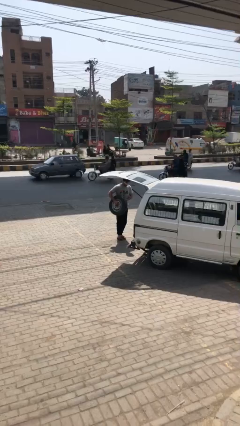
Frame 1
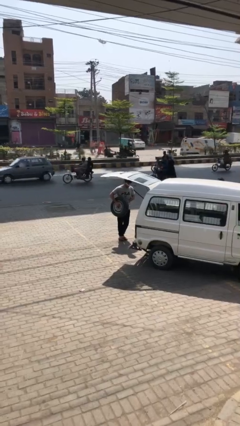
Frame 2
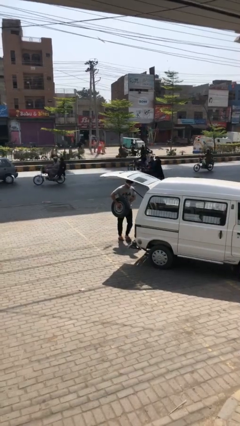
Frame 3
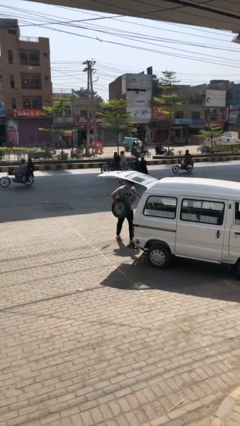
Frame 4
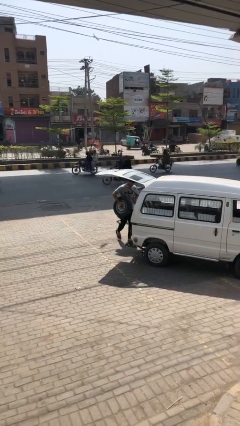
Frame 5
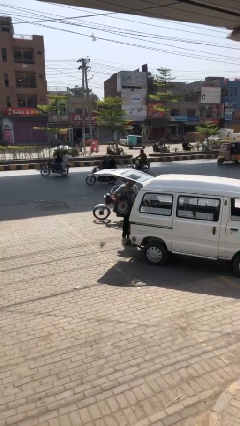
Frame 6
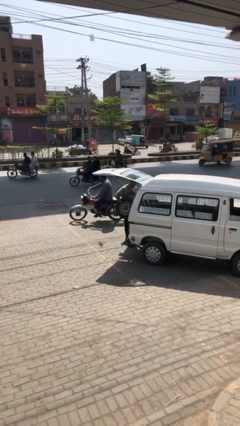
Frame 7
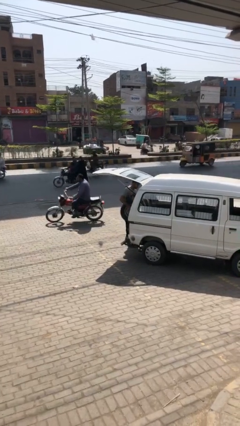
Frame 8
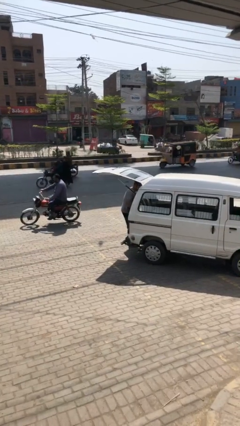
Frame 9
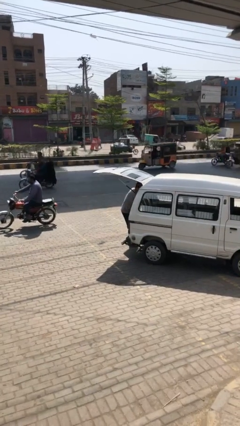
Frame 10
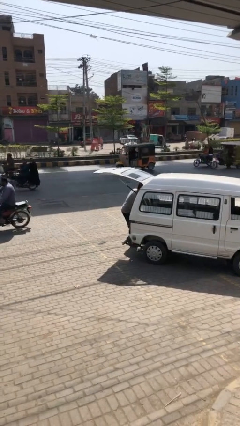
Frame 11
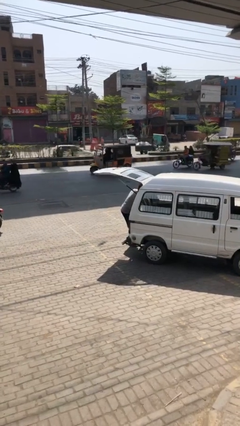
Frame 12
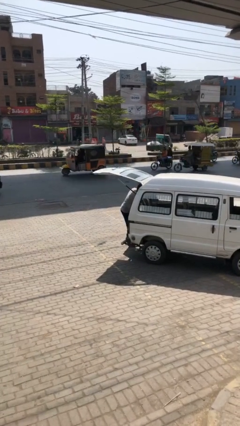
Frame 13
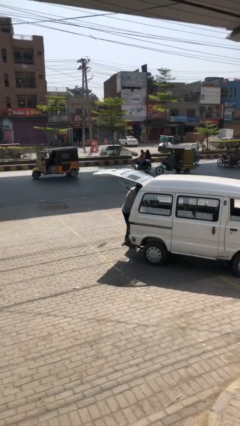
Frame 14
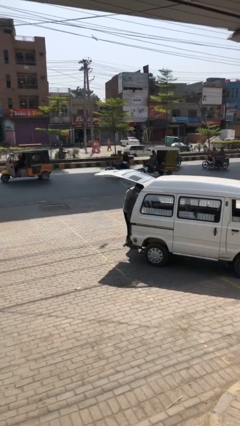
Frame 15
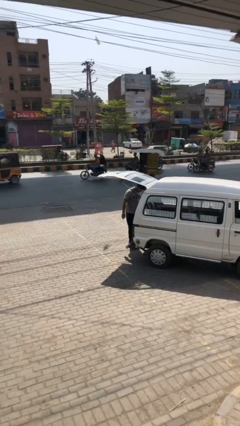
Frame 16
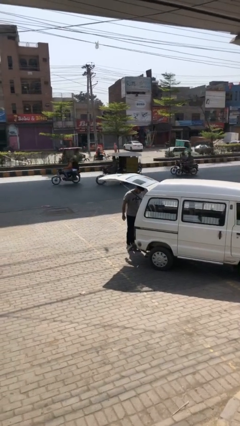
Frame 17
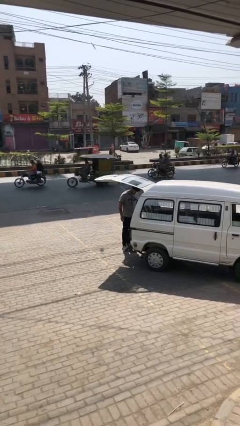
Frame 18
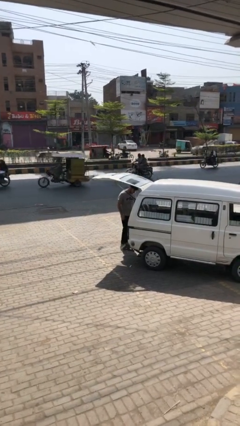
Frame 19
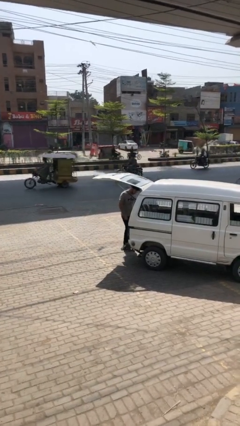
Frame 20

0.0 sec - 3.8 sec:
person loads car

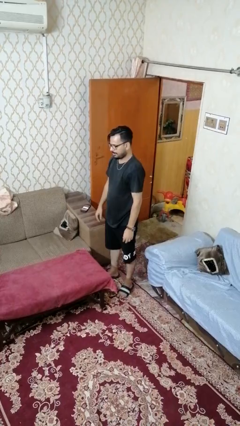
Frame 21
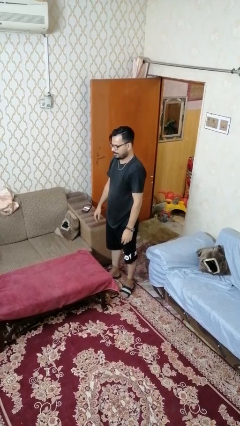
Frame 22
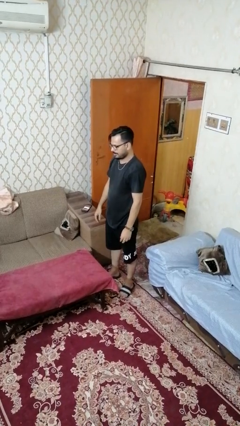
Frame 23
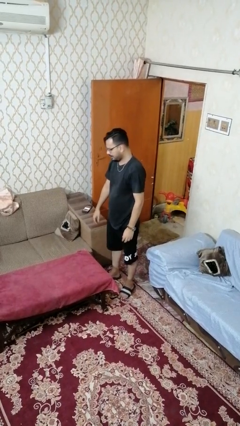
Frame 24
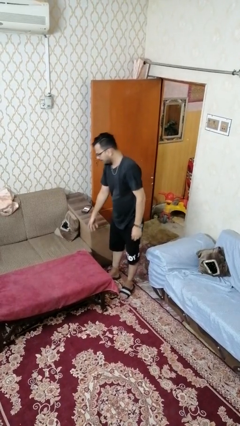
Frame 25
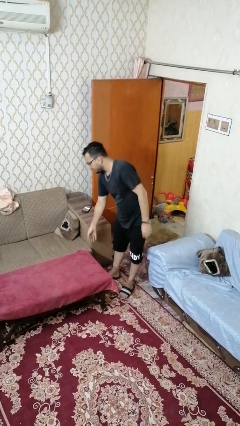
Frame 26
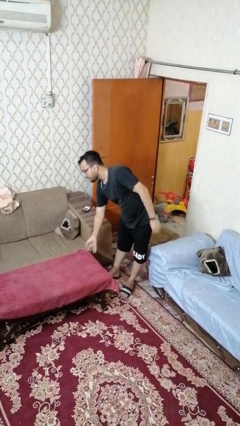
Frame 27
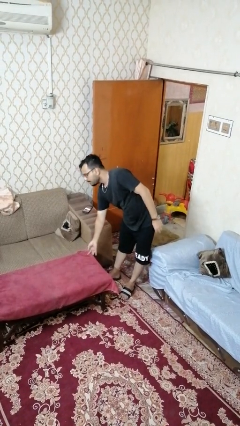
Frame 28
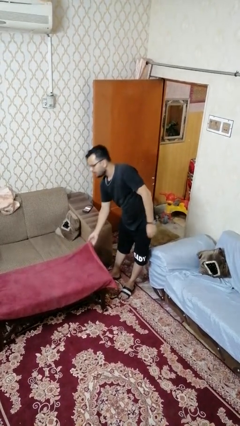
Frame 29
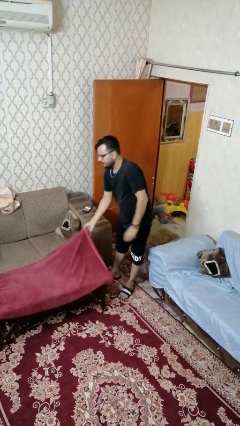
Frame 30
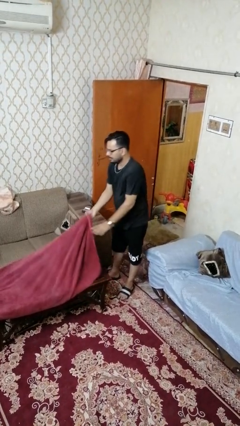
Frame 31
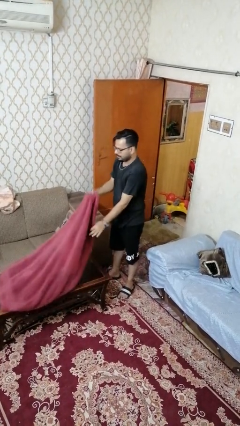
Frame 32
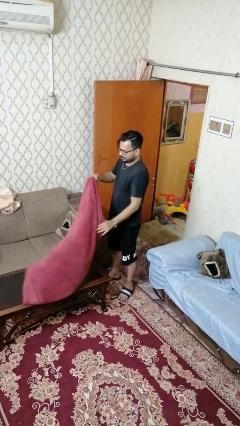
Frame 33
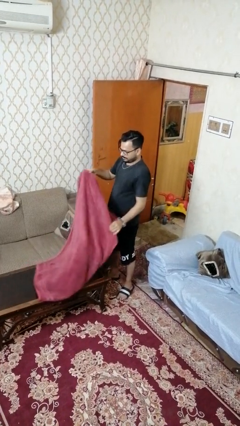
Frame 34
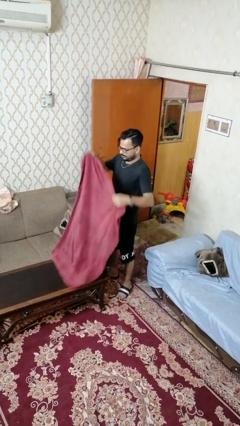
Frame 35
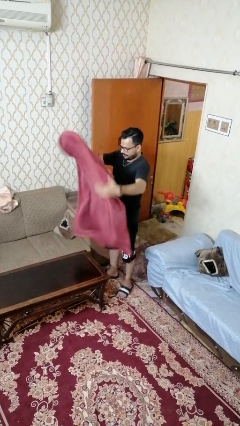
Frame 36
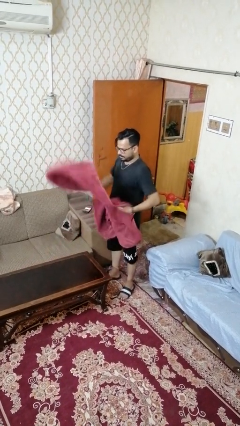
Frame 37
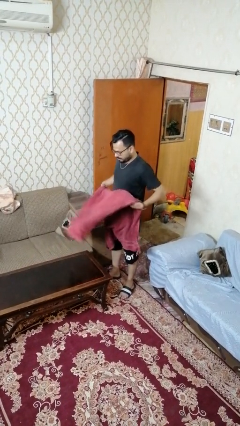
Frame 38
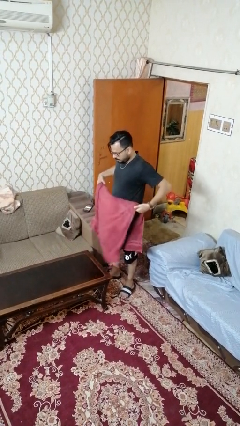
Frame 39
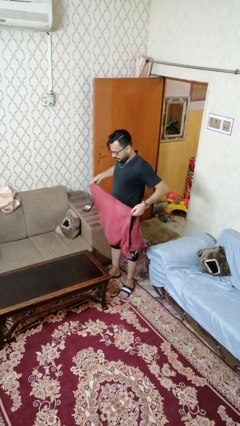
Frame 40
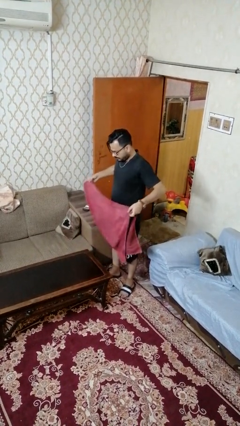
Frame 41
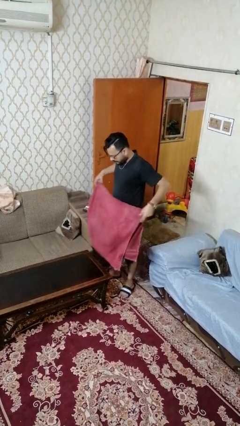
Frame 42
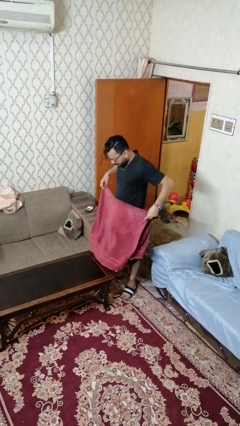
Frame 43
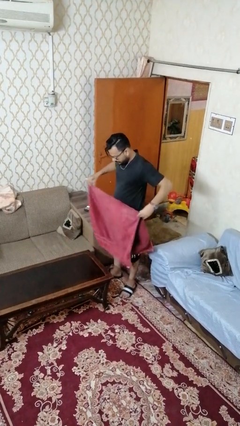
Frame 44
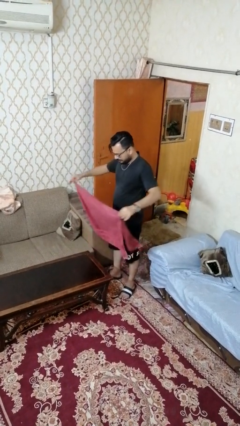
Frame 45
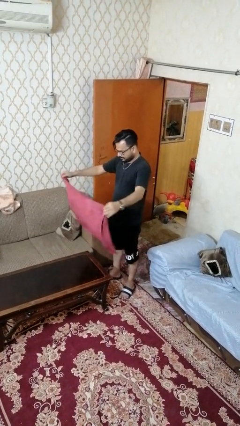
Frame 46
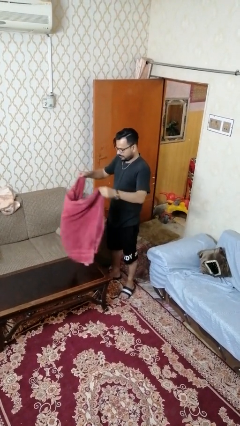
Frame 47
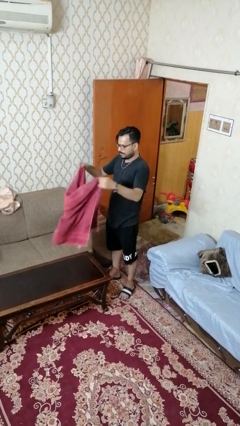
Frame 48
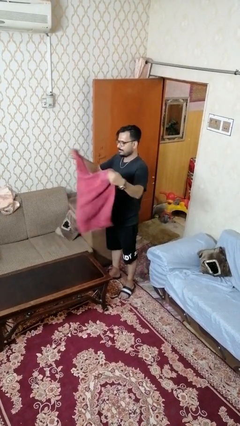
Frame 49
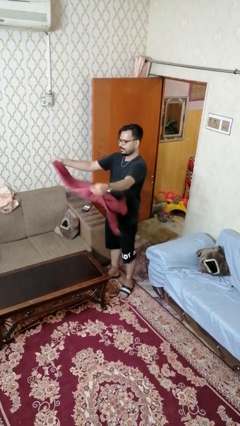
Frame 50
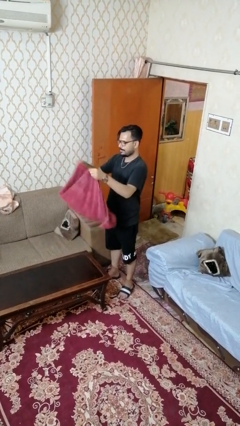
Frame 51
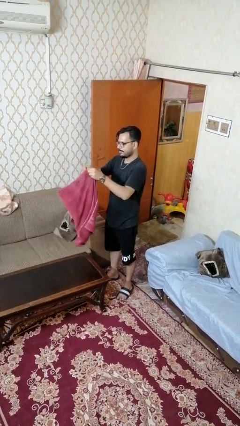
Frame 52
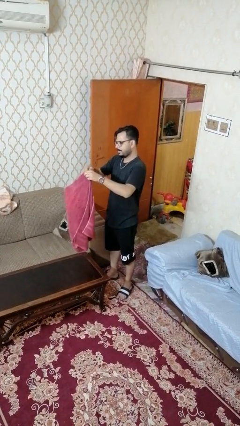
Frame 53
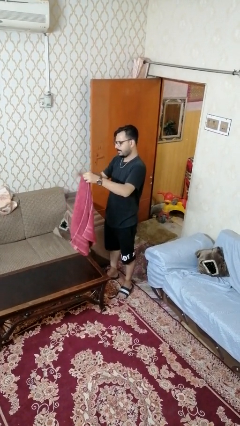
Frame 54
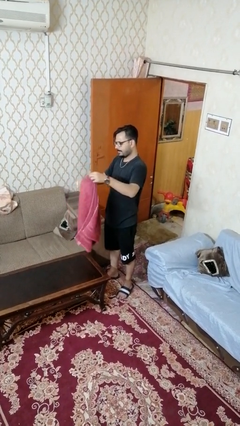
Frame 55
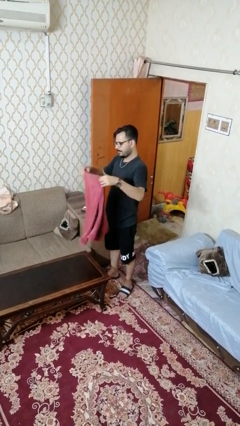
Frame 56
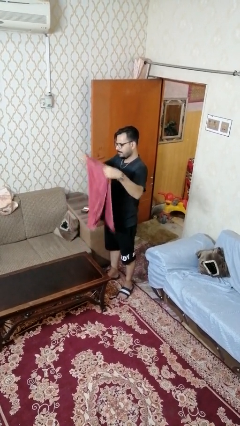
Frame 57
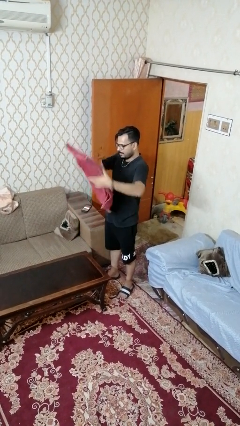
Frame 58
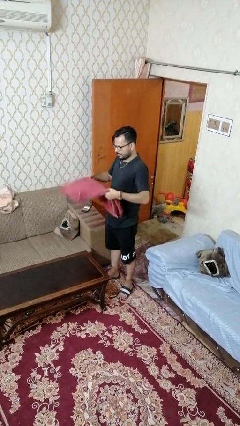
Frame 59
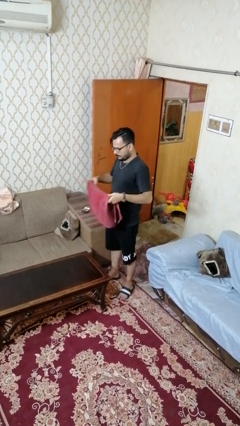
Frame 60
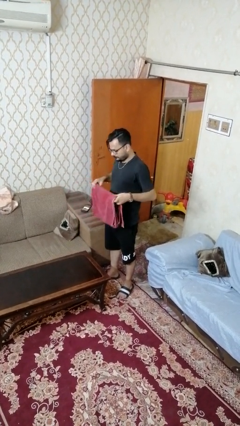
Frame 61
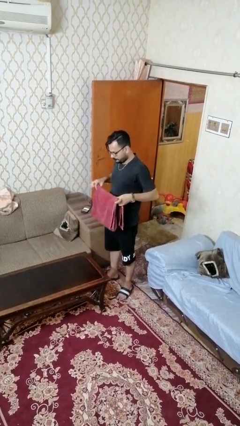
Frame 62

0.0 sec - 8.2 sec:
person folds tablecloth

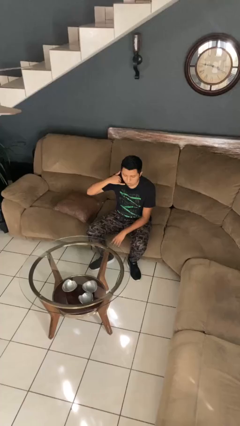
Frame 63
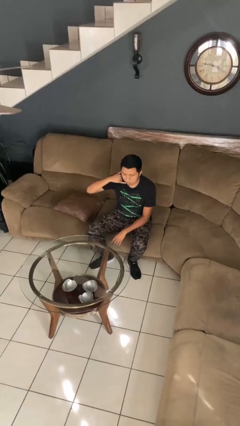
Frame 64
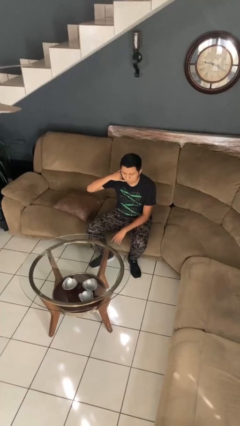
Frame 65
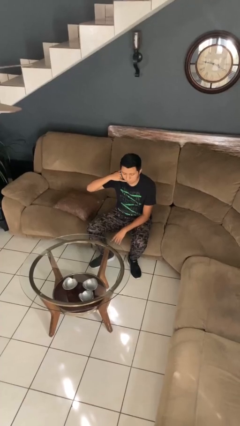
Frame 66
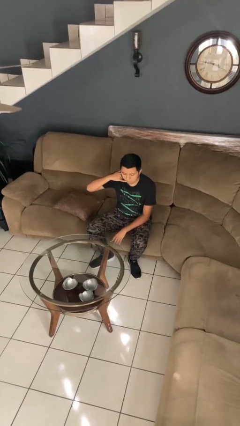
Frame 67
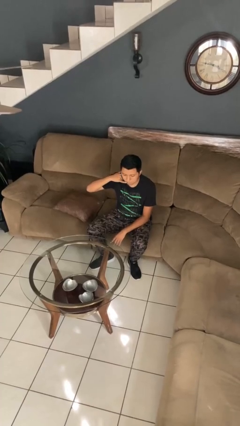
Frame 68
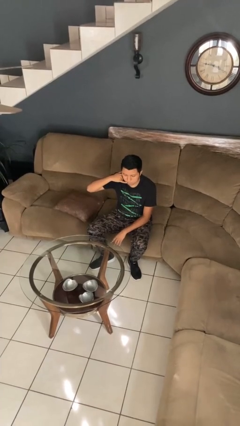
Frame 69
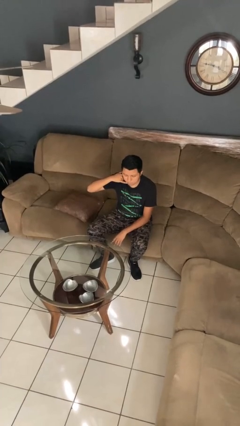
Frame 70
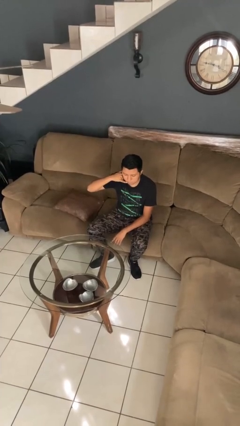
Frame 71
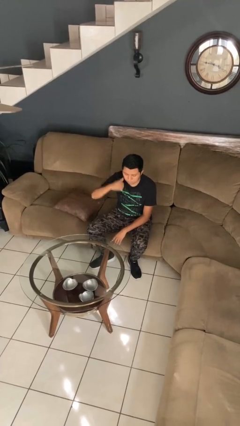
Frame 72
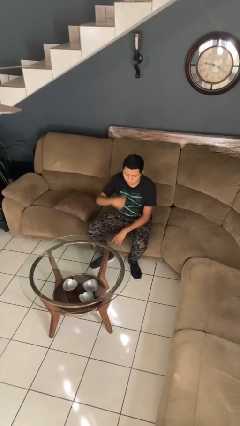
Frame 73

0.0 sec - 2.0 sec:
person gestures call me

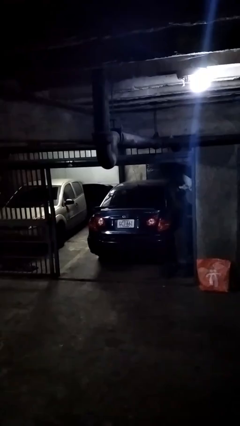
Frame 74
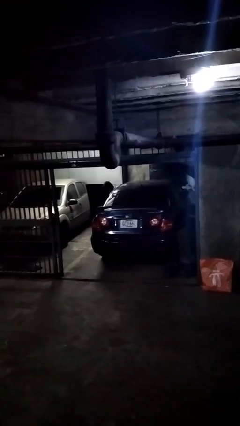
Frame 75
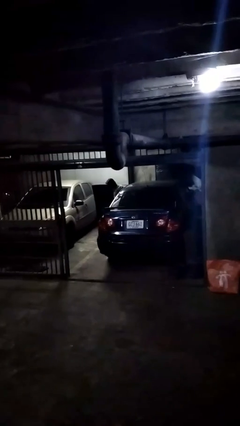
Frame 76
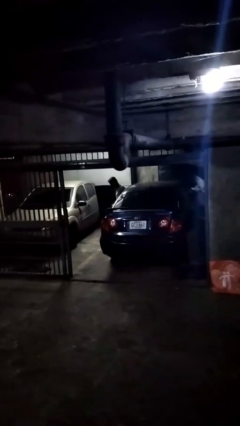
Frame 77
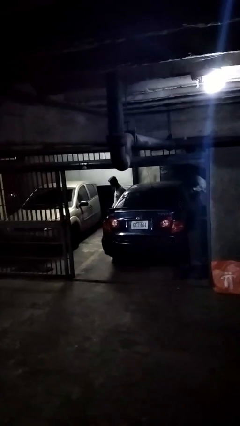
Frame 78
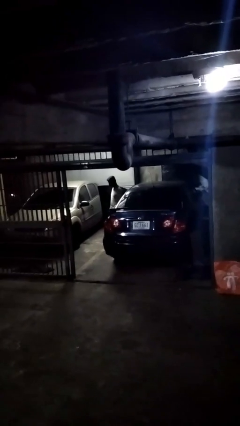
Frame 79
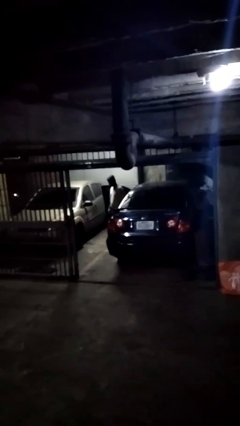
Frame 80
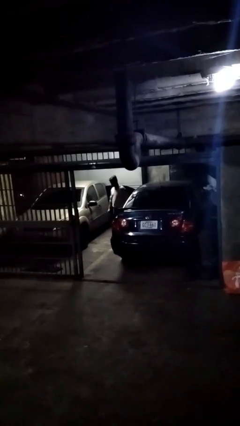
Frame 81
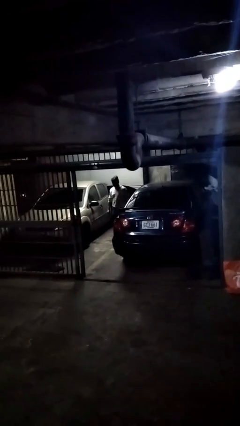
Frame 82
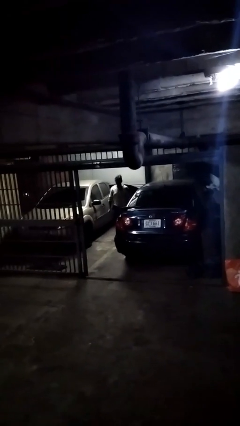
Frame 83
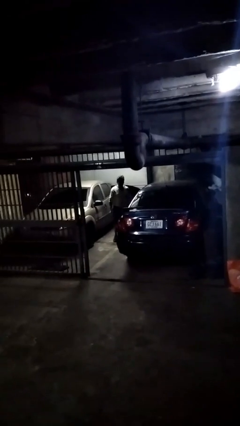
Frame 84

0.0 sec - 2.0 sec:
person exits car

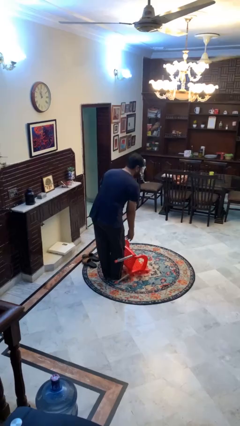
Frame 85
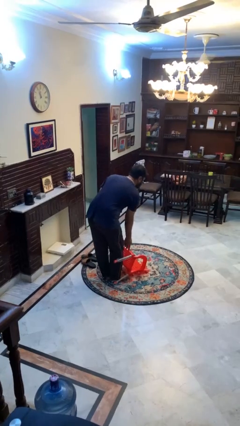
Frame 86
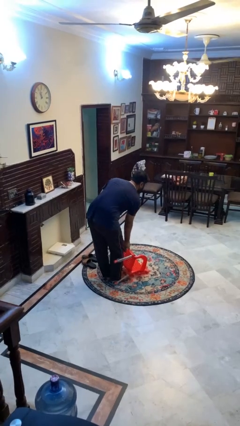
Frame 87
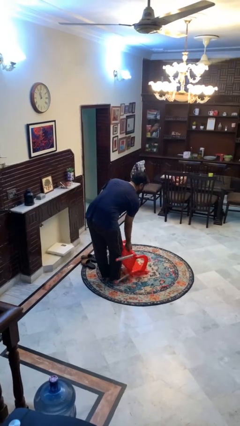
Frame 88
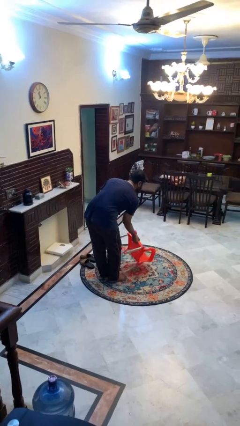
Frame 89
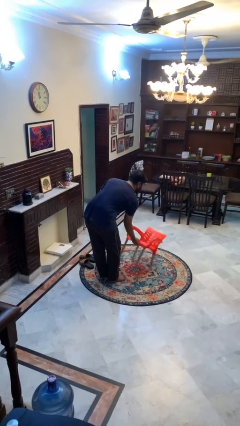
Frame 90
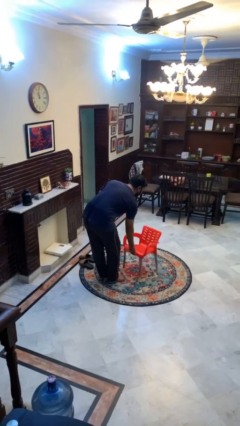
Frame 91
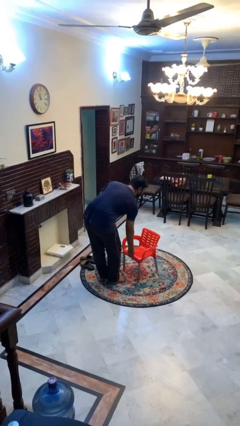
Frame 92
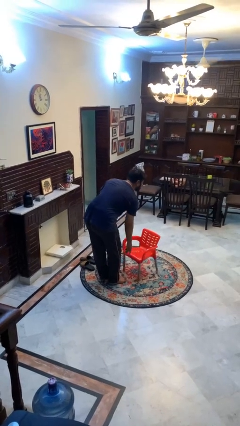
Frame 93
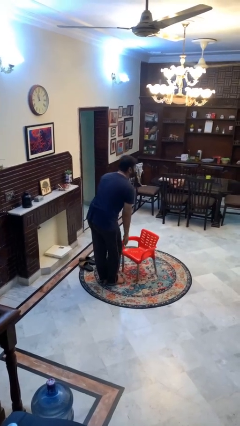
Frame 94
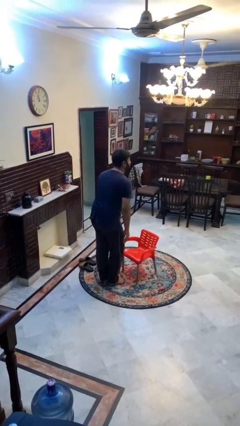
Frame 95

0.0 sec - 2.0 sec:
person sets upright furniture
